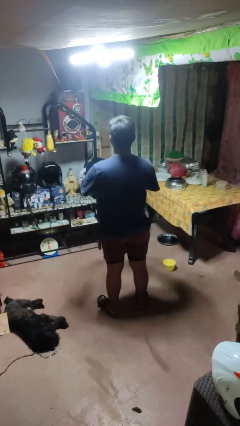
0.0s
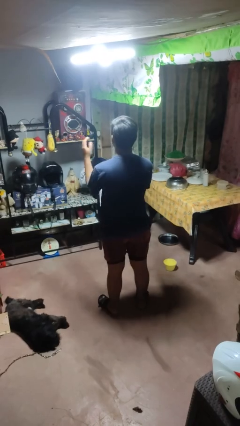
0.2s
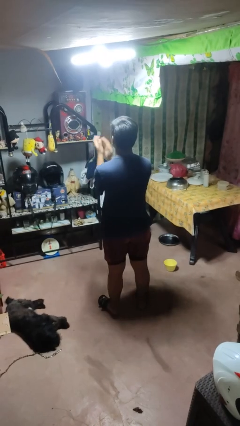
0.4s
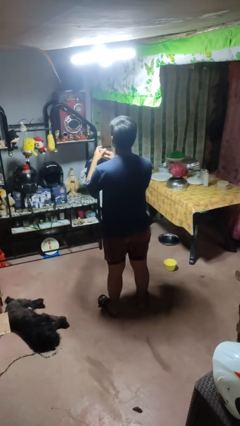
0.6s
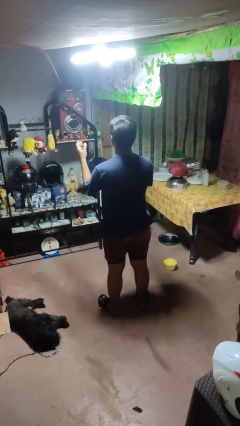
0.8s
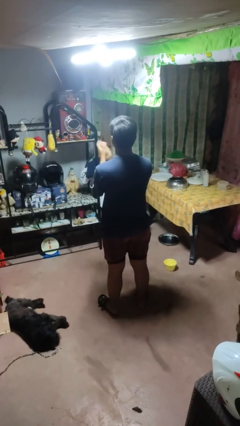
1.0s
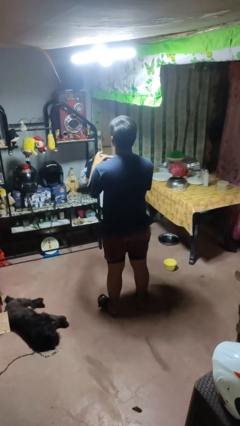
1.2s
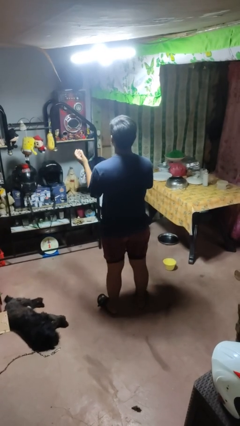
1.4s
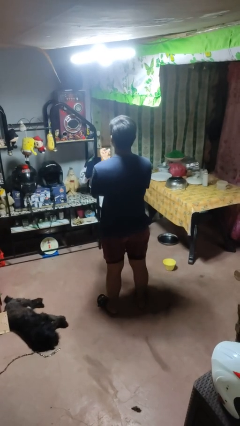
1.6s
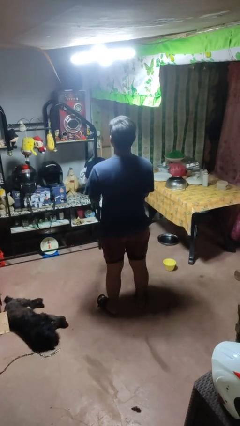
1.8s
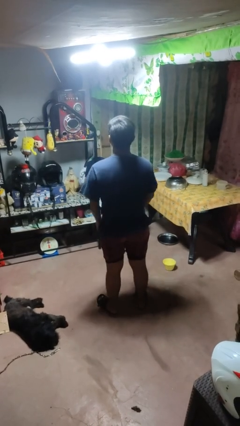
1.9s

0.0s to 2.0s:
person claps hands

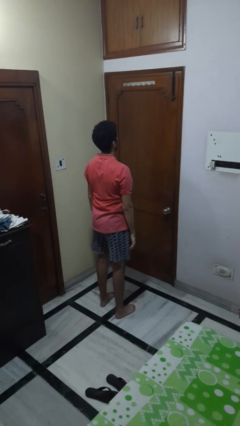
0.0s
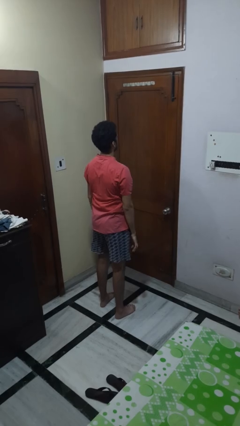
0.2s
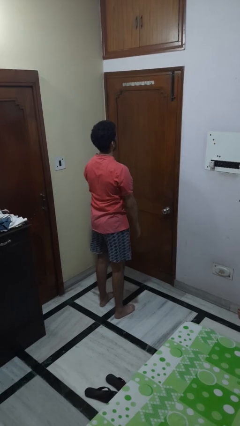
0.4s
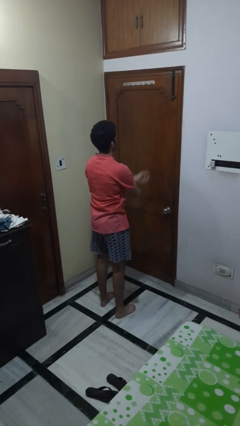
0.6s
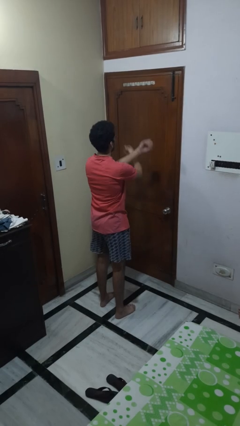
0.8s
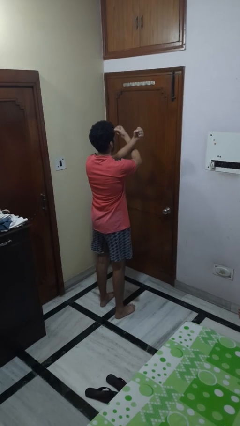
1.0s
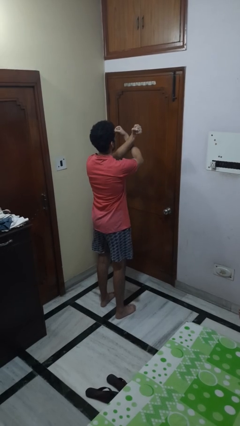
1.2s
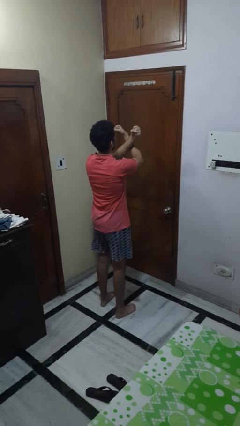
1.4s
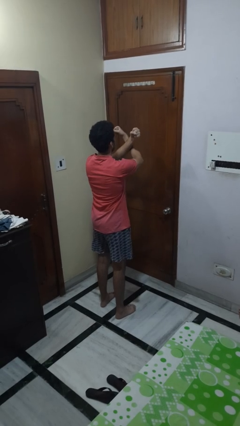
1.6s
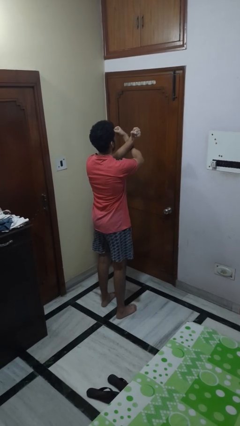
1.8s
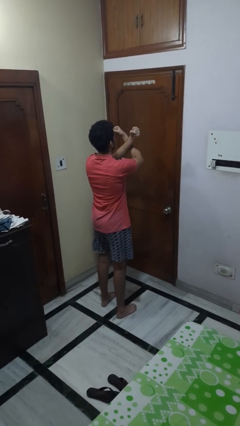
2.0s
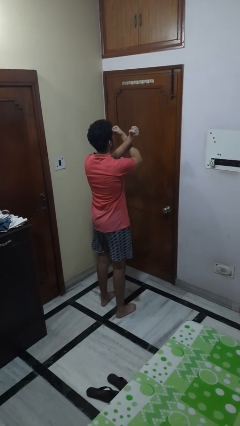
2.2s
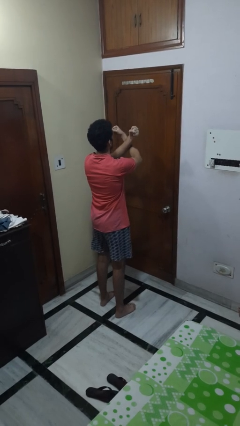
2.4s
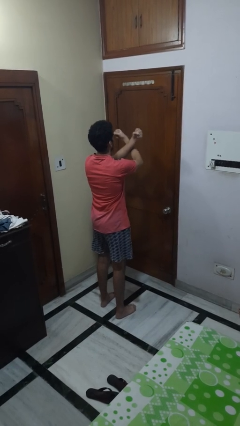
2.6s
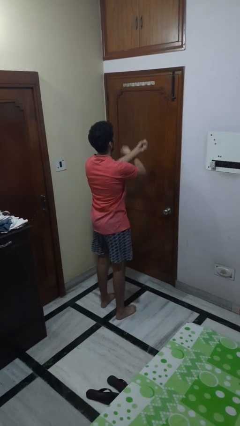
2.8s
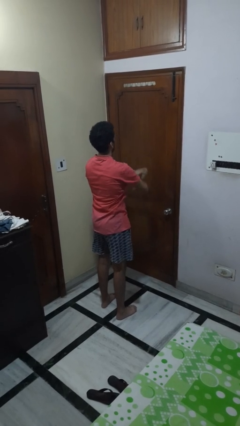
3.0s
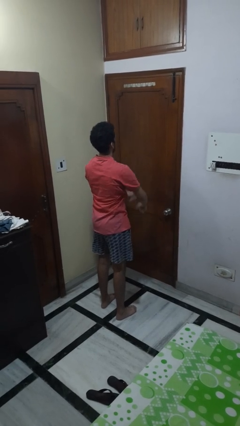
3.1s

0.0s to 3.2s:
person gestures arms x

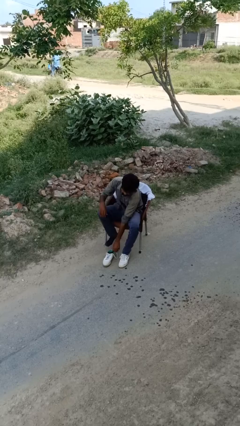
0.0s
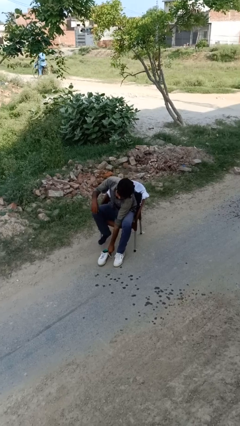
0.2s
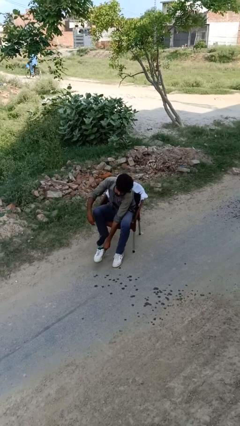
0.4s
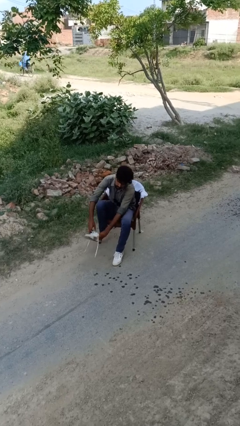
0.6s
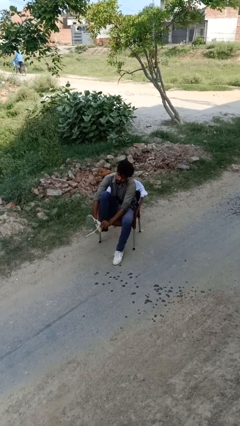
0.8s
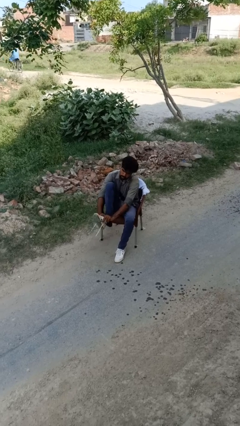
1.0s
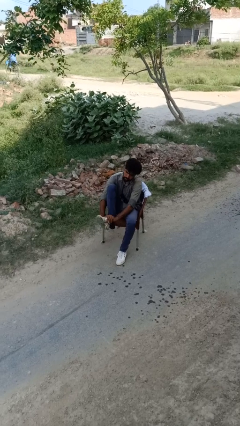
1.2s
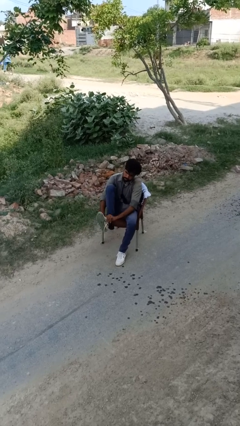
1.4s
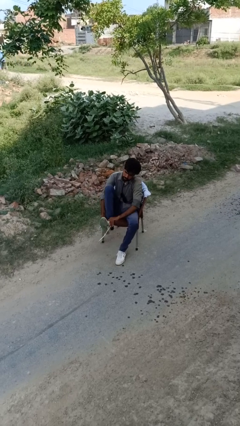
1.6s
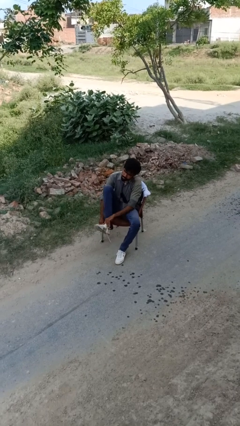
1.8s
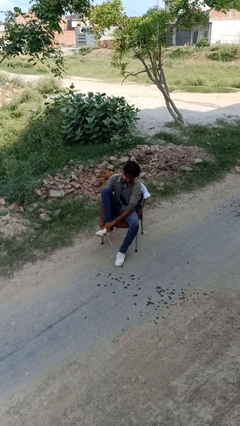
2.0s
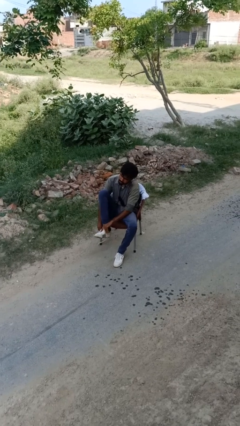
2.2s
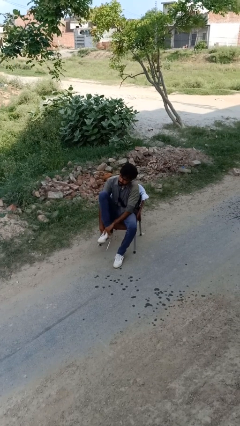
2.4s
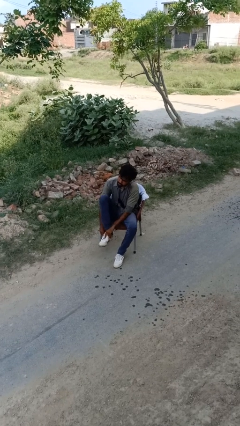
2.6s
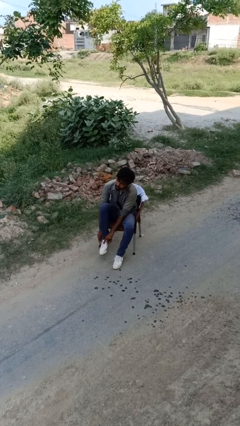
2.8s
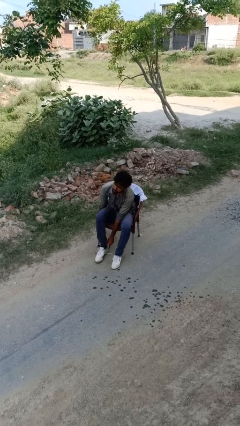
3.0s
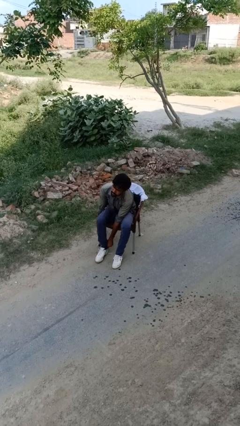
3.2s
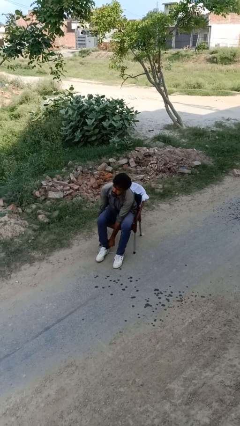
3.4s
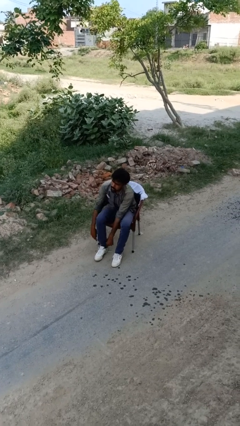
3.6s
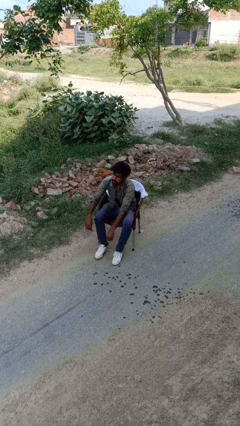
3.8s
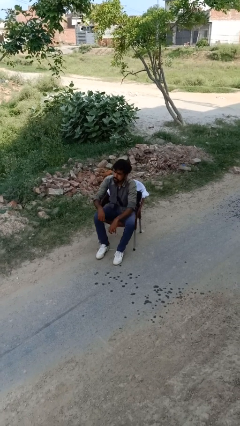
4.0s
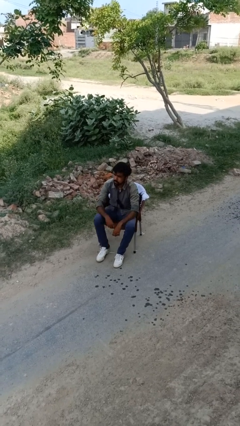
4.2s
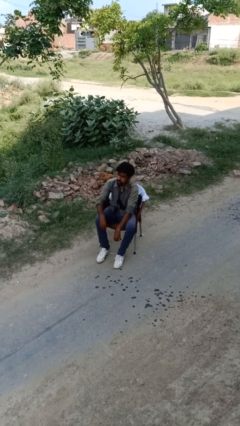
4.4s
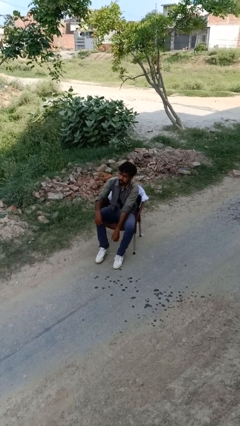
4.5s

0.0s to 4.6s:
person puts on shoes

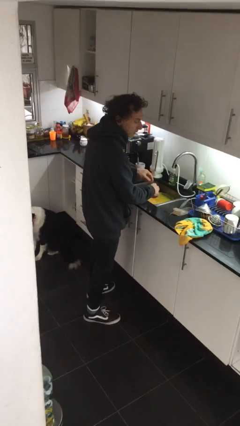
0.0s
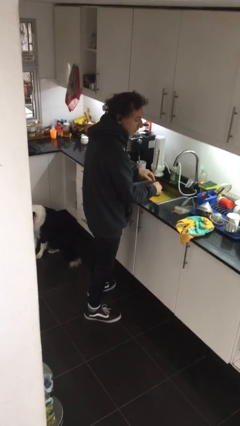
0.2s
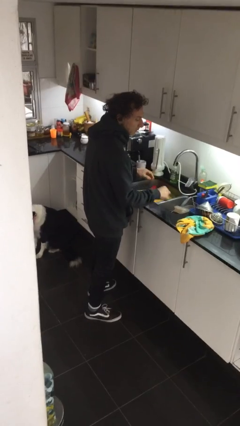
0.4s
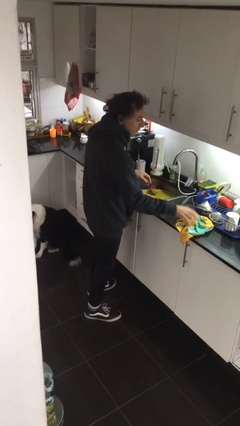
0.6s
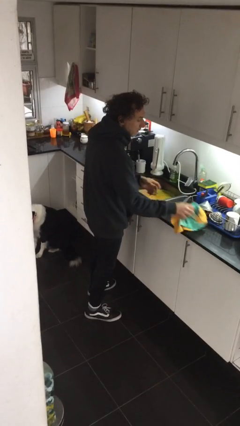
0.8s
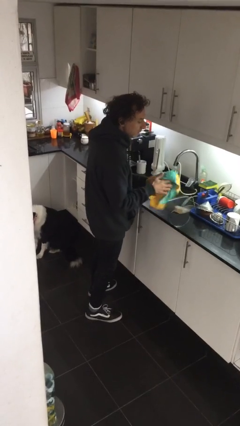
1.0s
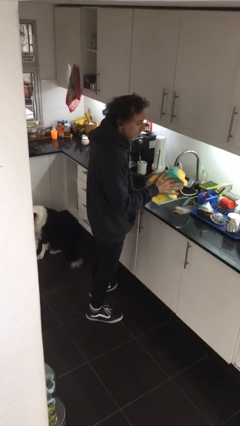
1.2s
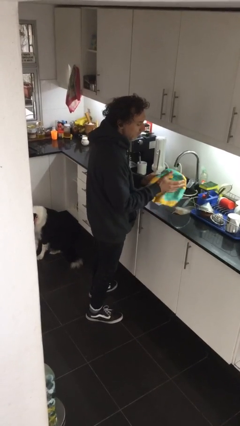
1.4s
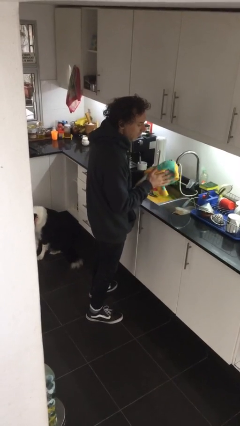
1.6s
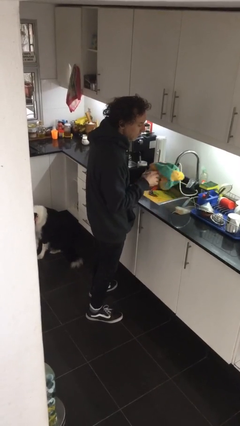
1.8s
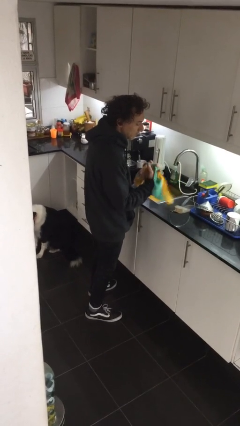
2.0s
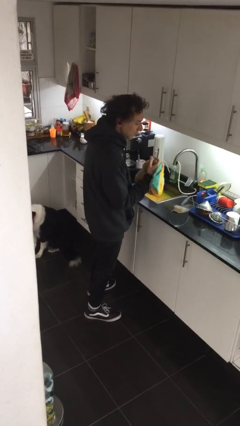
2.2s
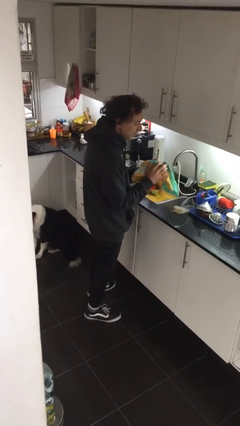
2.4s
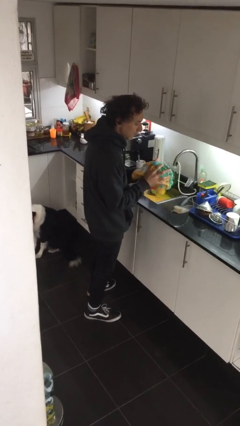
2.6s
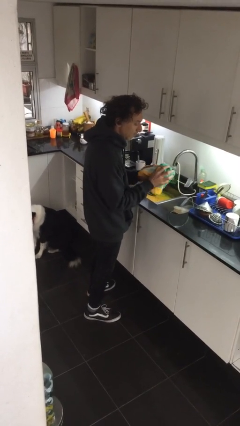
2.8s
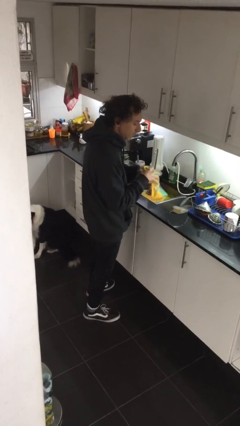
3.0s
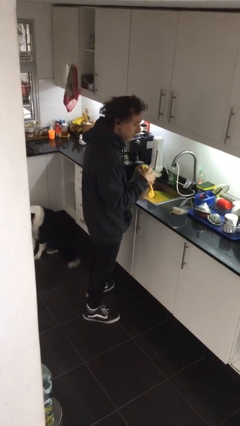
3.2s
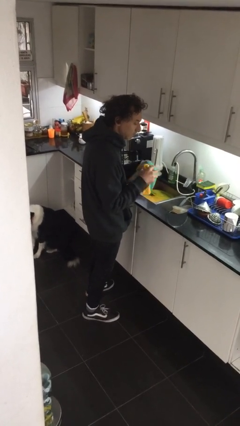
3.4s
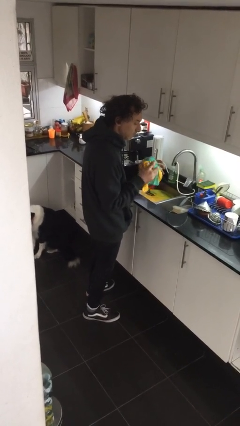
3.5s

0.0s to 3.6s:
person dries hands with towel

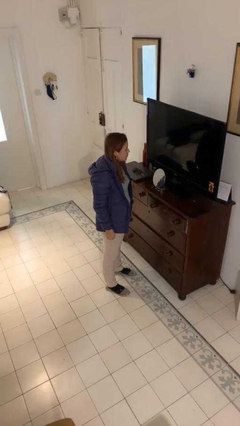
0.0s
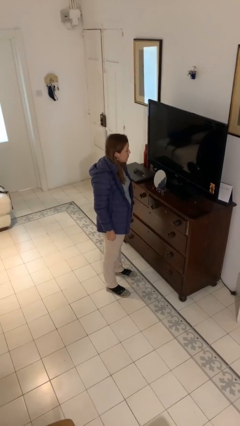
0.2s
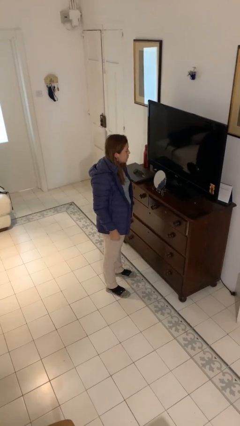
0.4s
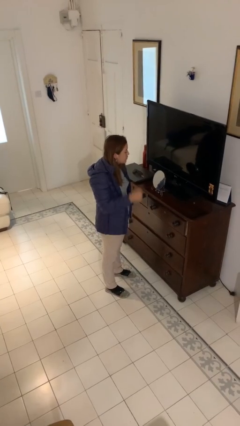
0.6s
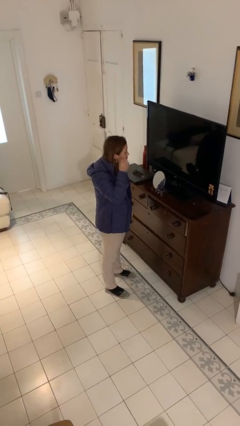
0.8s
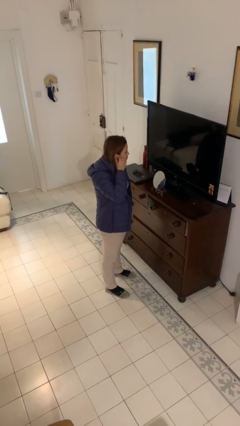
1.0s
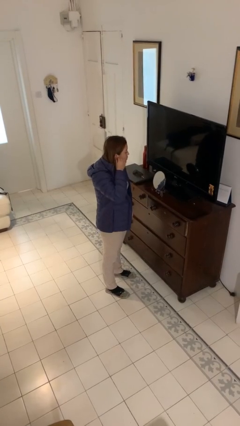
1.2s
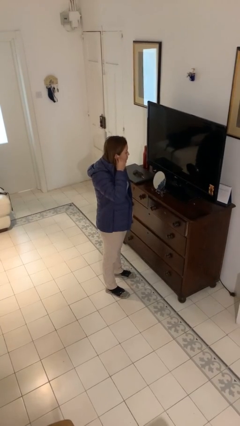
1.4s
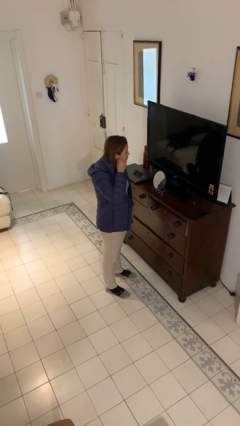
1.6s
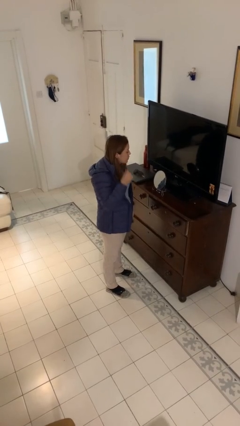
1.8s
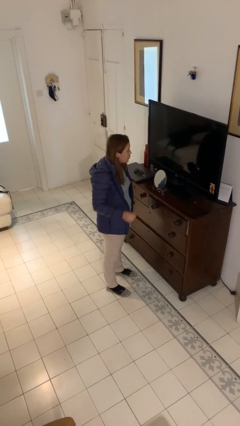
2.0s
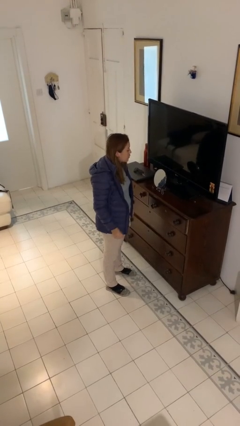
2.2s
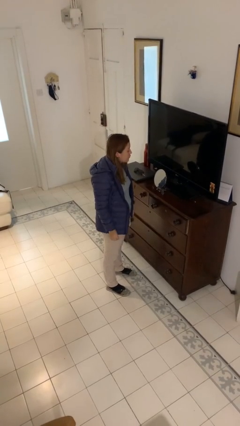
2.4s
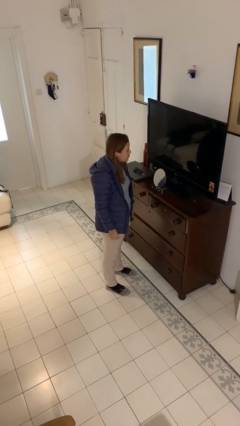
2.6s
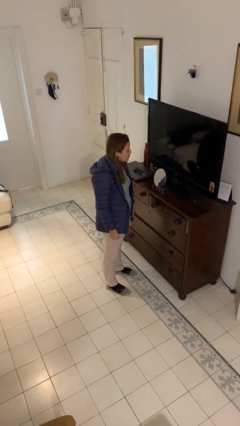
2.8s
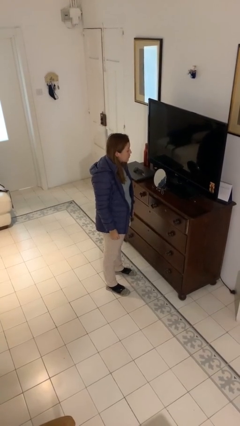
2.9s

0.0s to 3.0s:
person takes off earrings

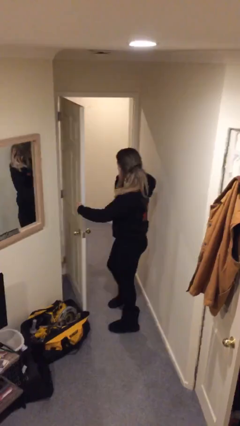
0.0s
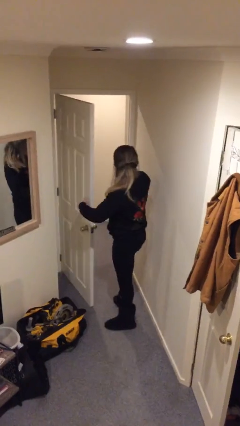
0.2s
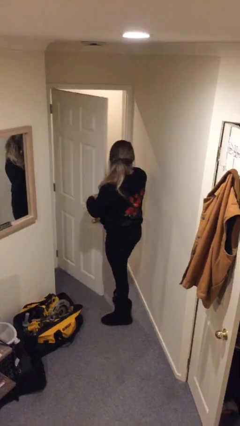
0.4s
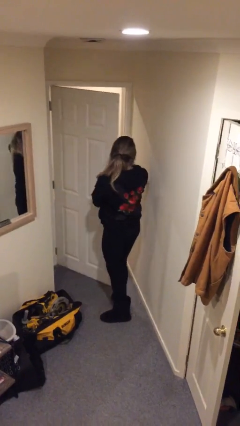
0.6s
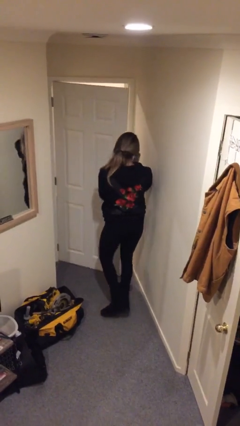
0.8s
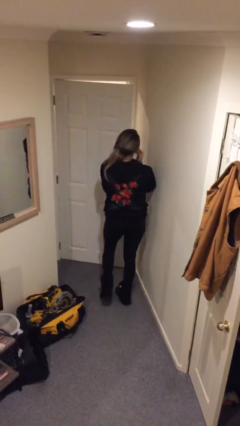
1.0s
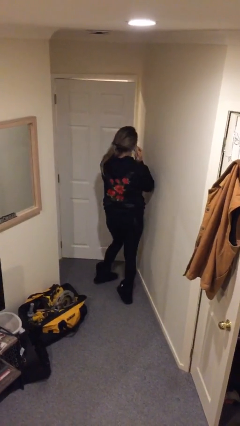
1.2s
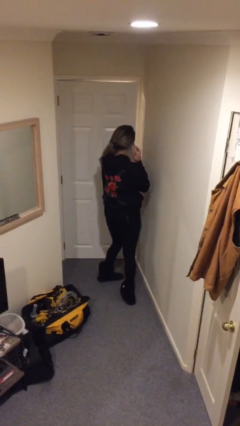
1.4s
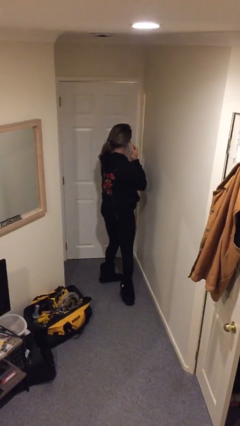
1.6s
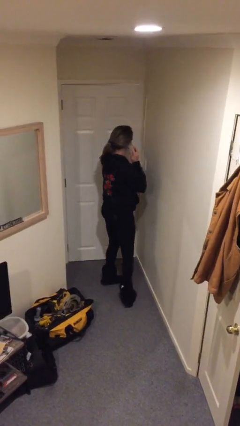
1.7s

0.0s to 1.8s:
person closes facility door
